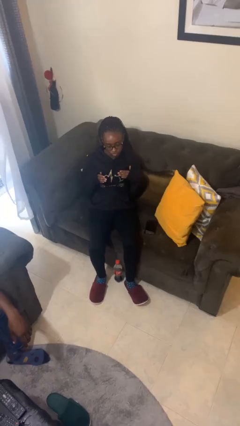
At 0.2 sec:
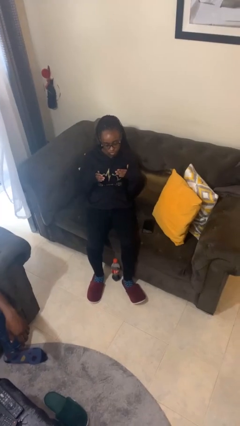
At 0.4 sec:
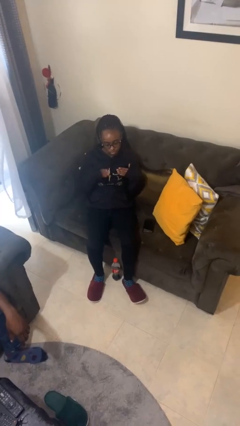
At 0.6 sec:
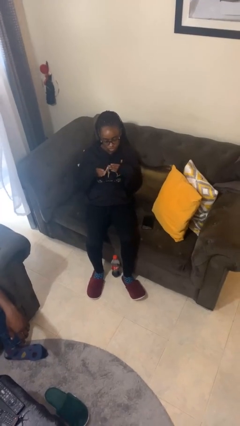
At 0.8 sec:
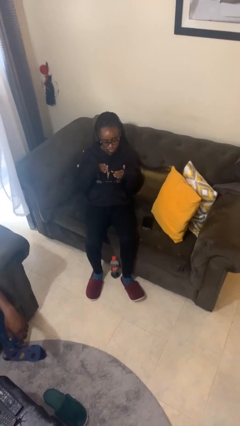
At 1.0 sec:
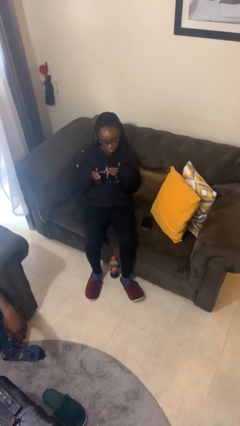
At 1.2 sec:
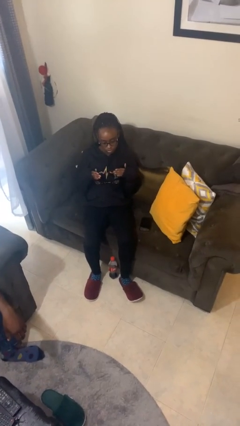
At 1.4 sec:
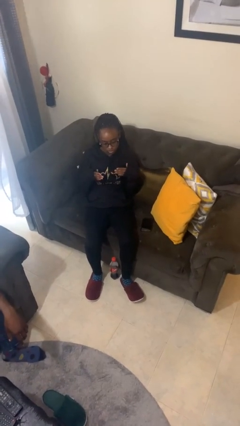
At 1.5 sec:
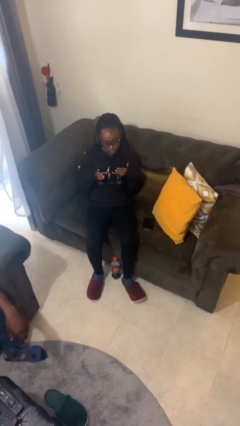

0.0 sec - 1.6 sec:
person drums on chest

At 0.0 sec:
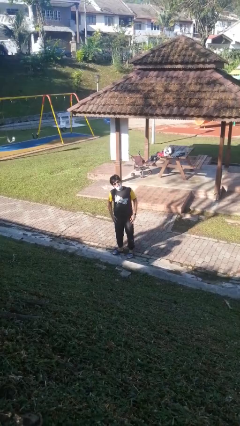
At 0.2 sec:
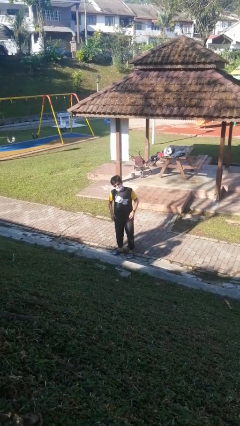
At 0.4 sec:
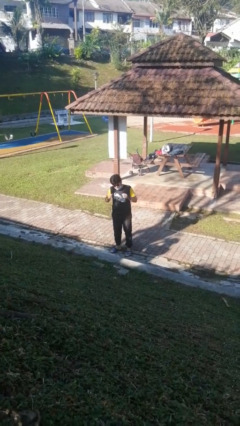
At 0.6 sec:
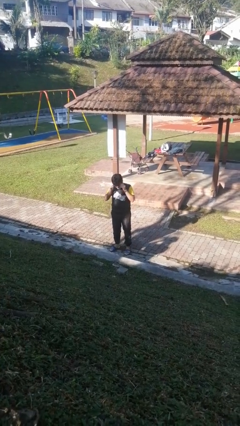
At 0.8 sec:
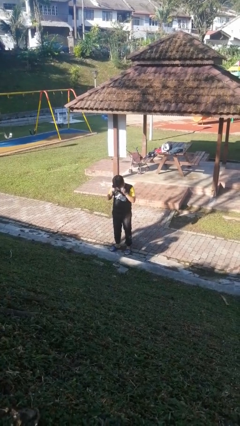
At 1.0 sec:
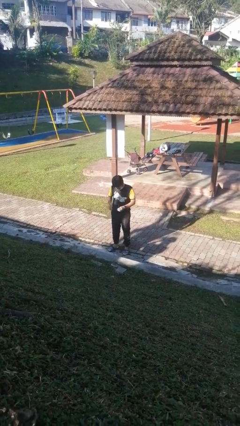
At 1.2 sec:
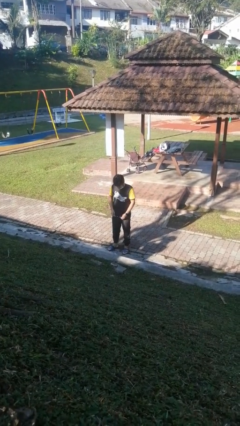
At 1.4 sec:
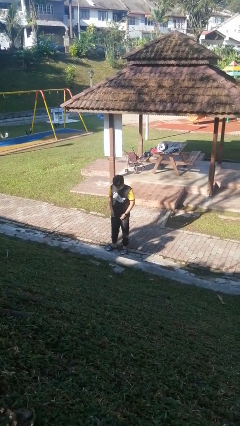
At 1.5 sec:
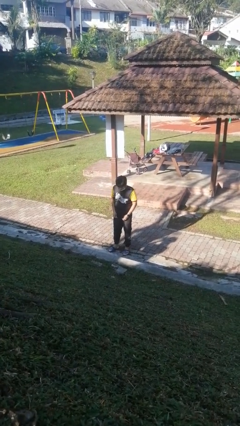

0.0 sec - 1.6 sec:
person takes off sunglasses

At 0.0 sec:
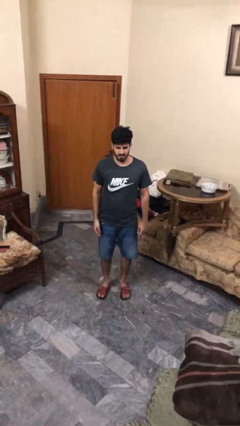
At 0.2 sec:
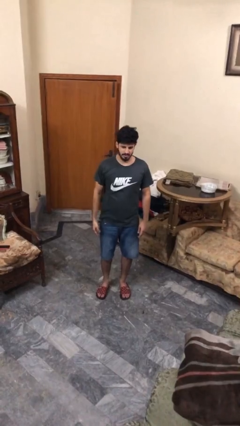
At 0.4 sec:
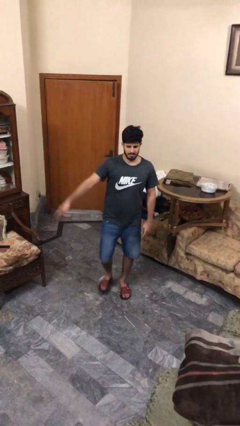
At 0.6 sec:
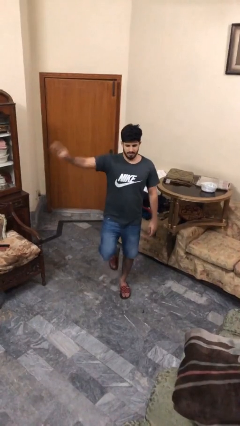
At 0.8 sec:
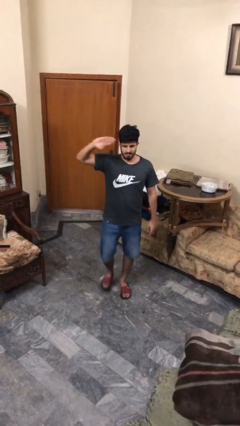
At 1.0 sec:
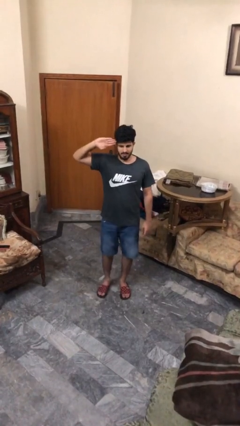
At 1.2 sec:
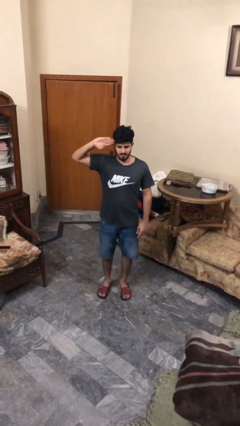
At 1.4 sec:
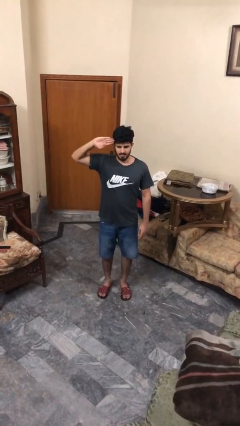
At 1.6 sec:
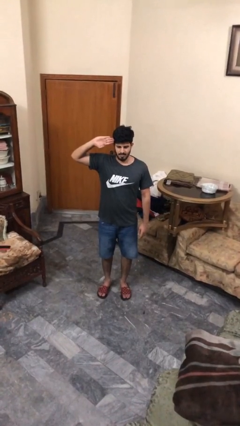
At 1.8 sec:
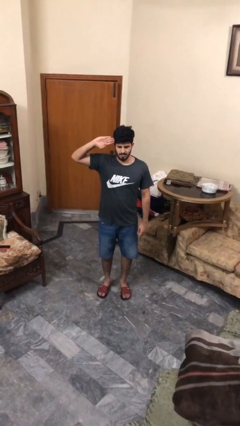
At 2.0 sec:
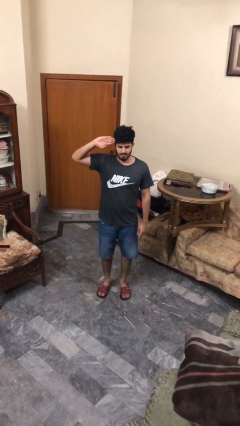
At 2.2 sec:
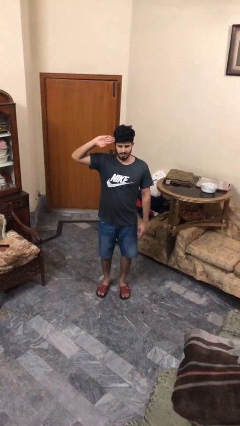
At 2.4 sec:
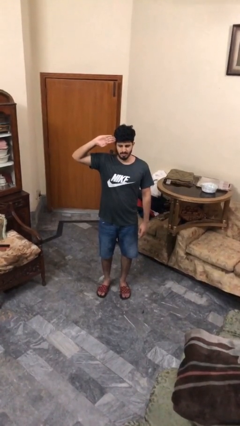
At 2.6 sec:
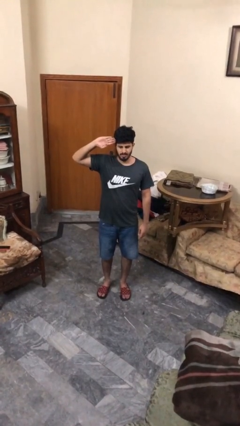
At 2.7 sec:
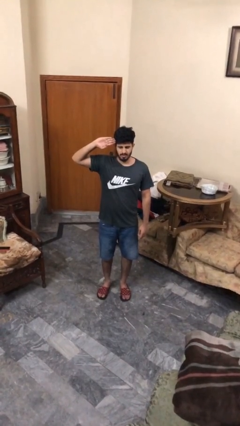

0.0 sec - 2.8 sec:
person salutes

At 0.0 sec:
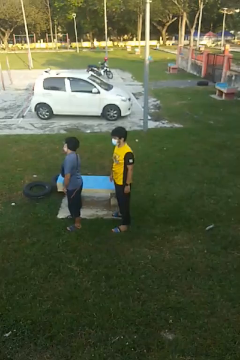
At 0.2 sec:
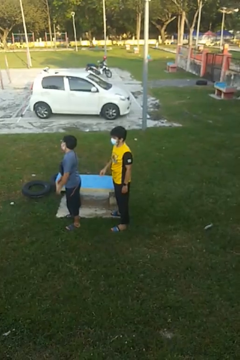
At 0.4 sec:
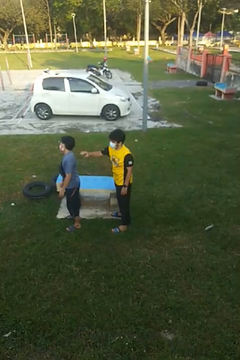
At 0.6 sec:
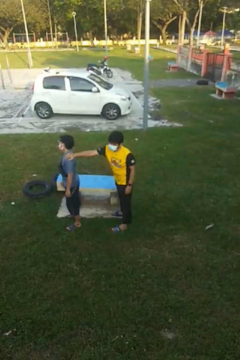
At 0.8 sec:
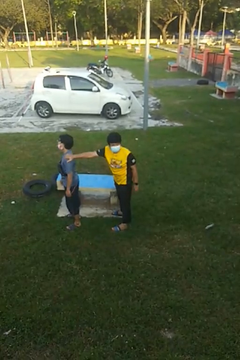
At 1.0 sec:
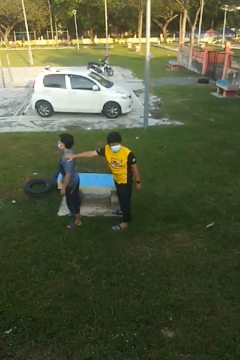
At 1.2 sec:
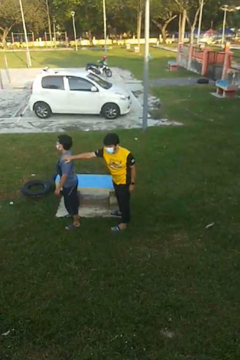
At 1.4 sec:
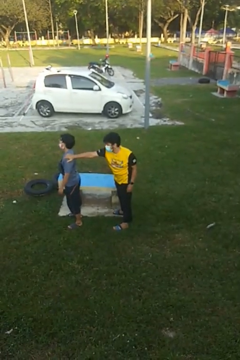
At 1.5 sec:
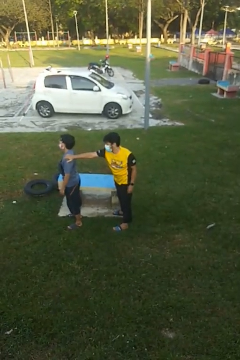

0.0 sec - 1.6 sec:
person grabs person by shoulder

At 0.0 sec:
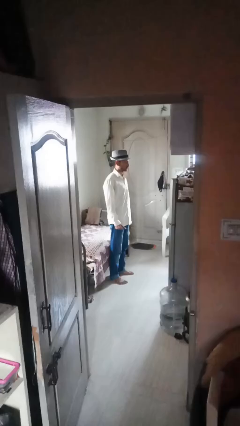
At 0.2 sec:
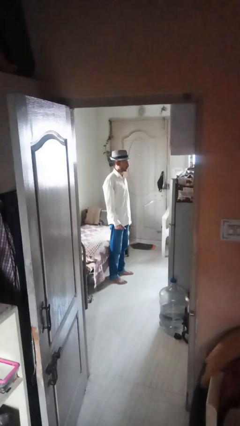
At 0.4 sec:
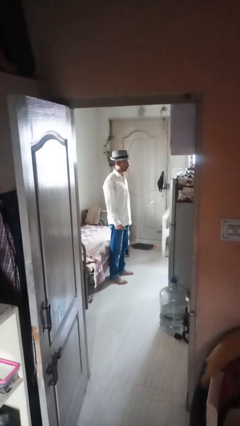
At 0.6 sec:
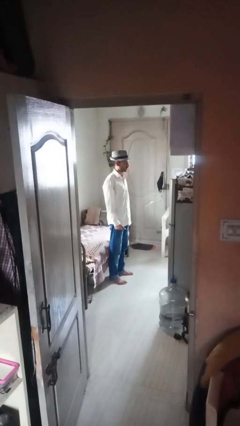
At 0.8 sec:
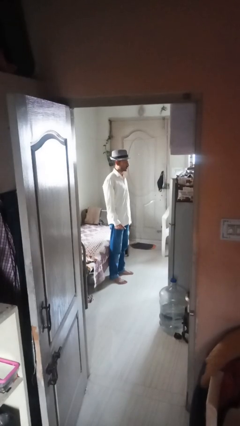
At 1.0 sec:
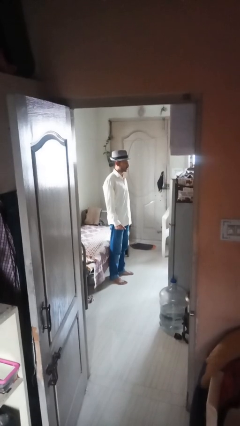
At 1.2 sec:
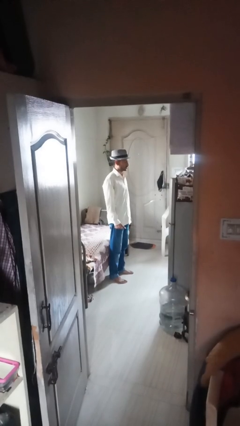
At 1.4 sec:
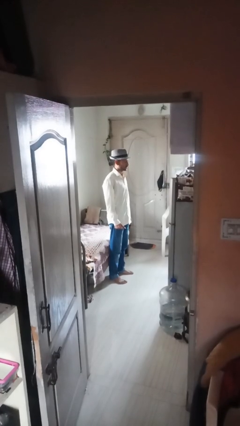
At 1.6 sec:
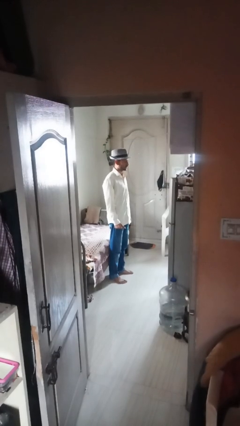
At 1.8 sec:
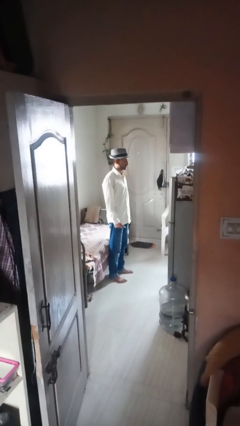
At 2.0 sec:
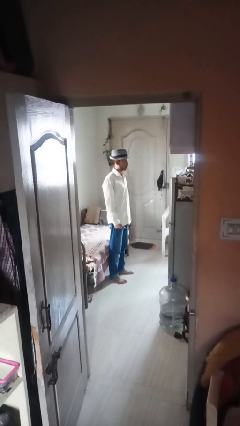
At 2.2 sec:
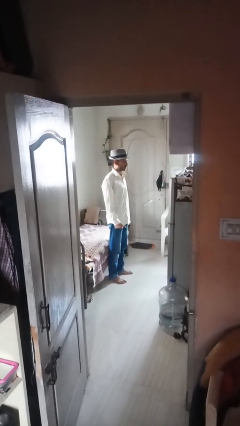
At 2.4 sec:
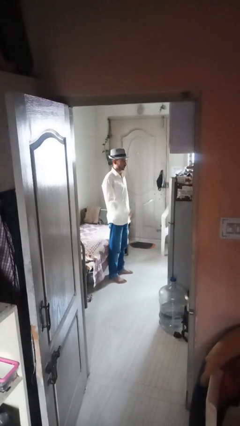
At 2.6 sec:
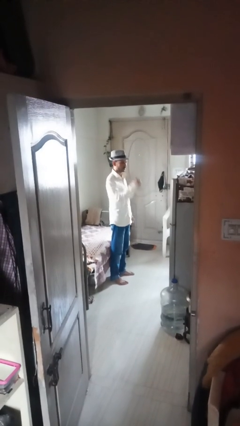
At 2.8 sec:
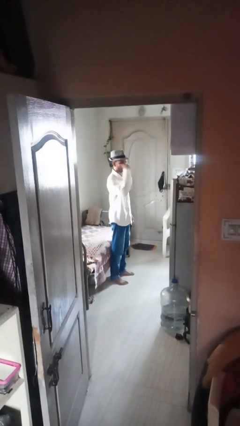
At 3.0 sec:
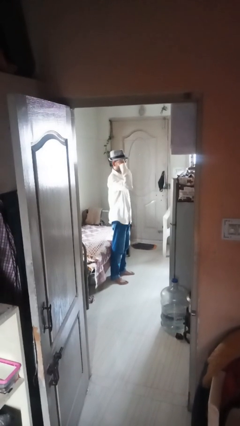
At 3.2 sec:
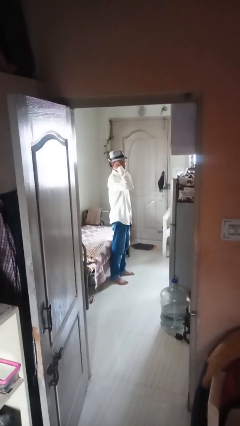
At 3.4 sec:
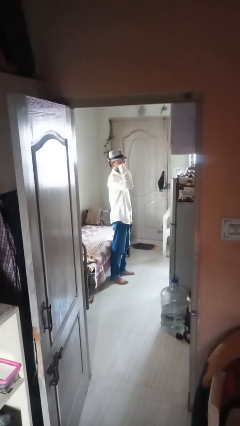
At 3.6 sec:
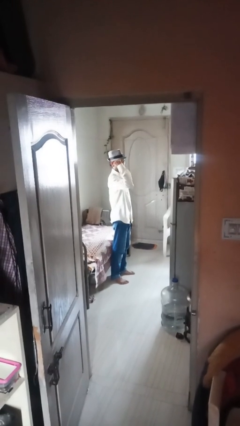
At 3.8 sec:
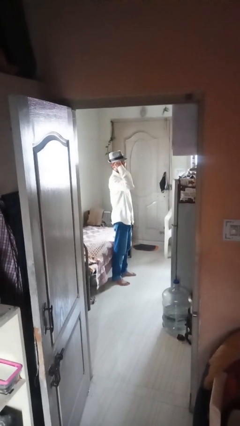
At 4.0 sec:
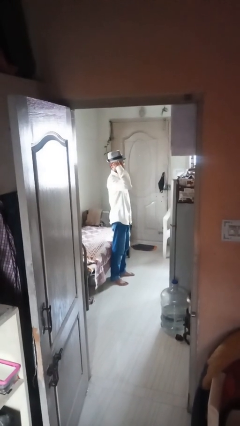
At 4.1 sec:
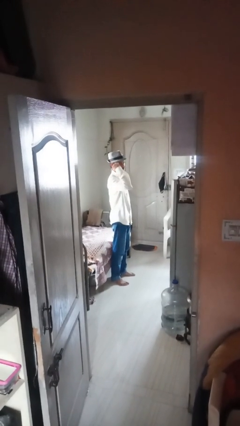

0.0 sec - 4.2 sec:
person gestures behind me

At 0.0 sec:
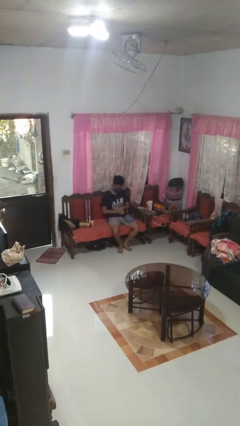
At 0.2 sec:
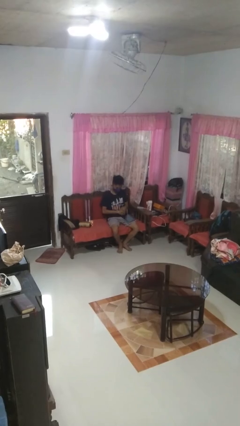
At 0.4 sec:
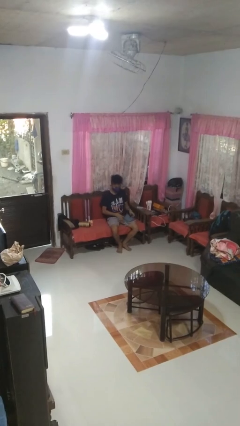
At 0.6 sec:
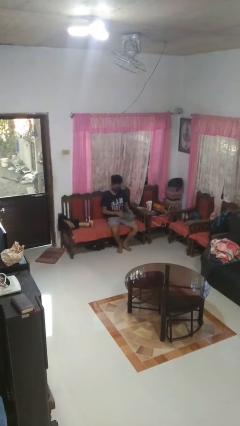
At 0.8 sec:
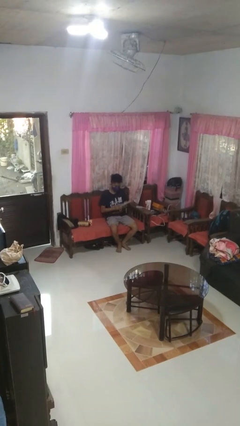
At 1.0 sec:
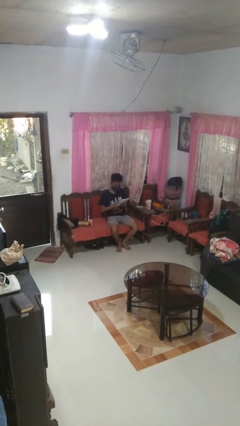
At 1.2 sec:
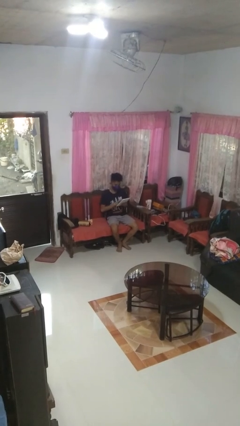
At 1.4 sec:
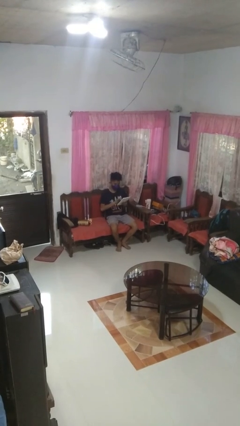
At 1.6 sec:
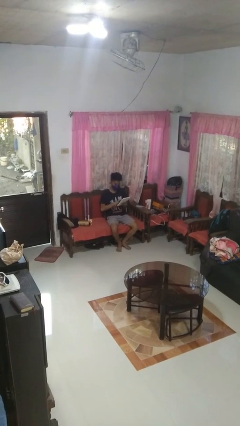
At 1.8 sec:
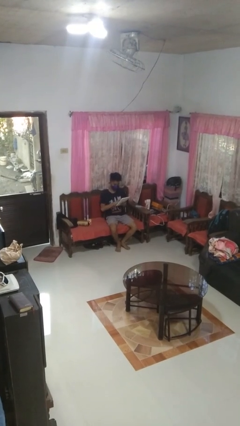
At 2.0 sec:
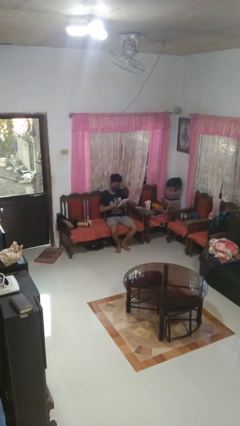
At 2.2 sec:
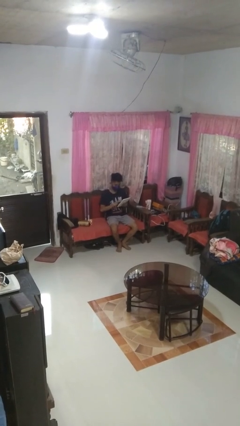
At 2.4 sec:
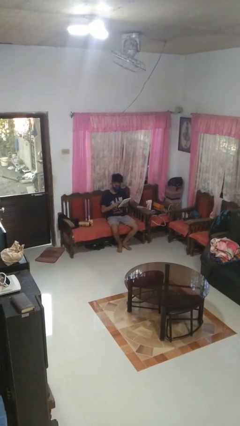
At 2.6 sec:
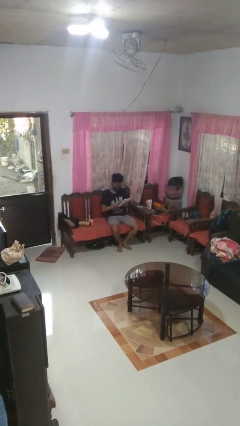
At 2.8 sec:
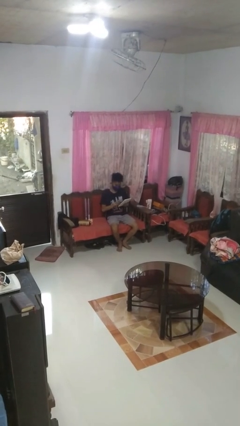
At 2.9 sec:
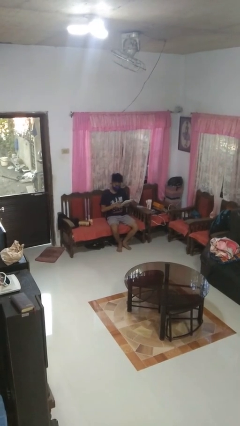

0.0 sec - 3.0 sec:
person interacts with tablet

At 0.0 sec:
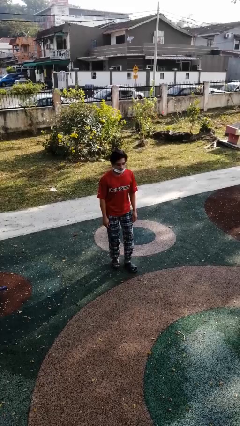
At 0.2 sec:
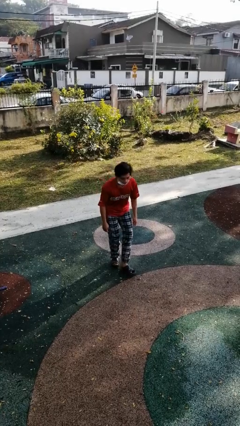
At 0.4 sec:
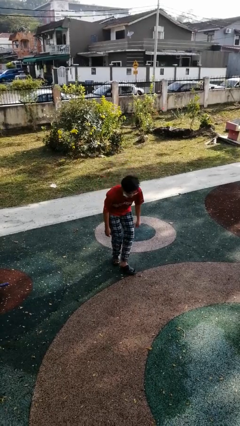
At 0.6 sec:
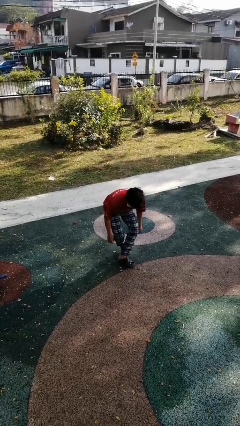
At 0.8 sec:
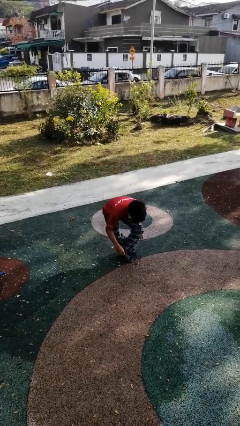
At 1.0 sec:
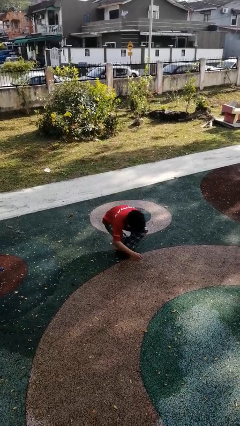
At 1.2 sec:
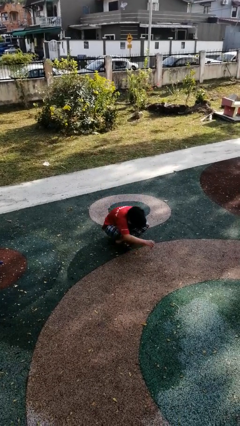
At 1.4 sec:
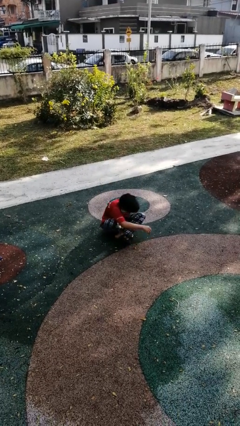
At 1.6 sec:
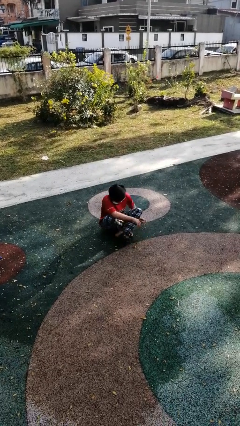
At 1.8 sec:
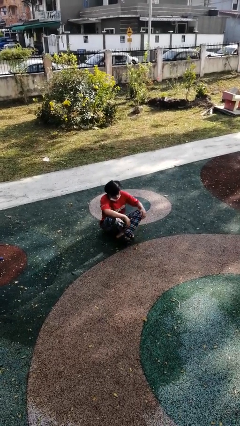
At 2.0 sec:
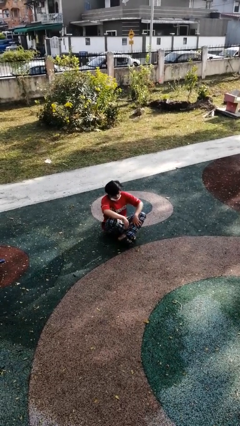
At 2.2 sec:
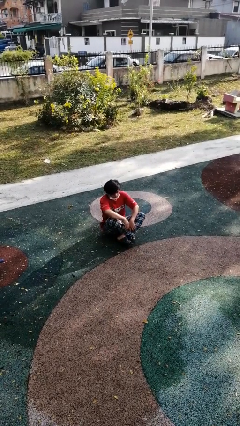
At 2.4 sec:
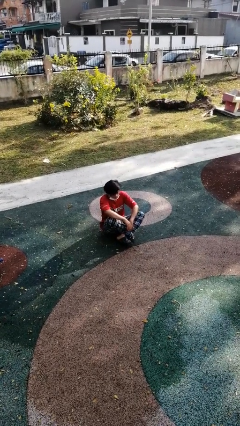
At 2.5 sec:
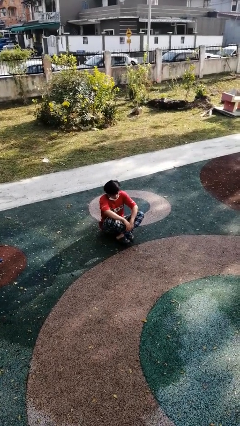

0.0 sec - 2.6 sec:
person sits crisscross

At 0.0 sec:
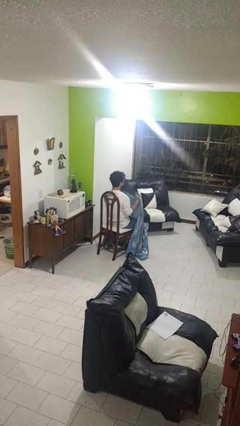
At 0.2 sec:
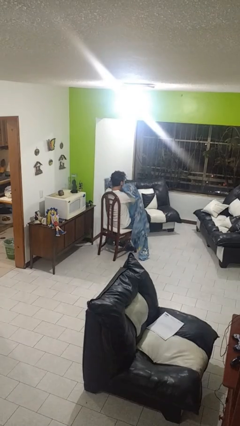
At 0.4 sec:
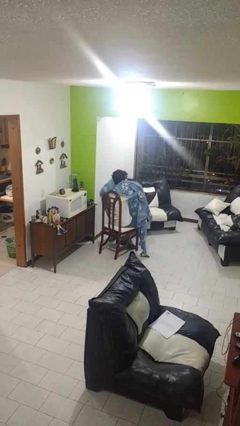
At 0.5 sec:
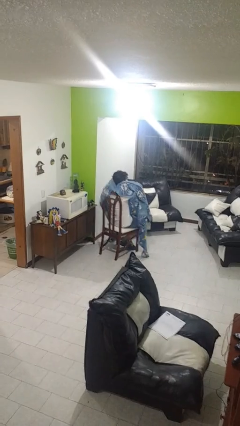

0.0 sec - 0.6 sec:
person covers with blanket
